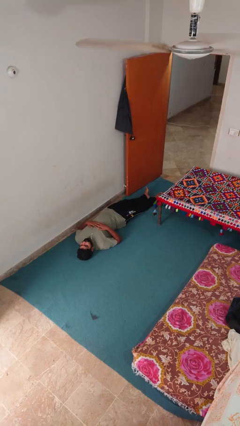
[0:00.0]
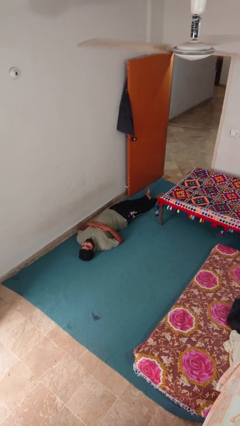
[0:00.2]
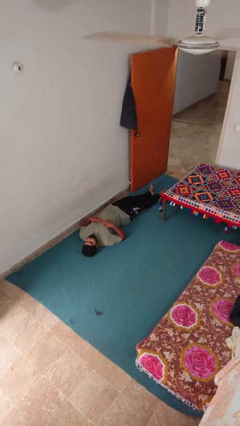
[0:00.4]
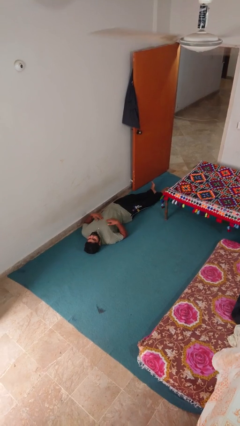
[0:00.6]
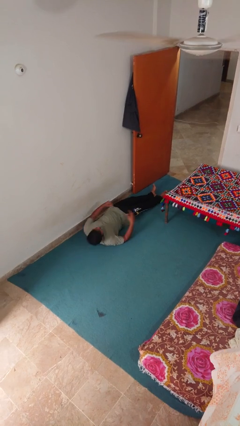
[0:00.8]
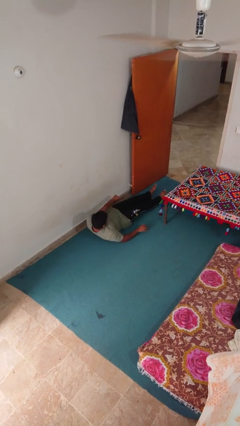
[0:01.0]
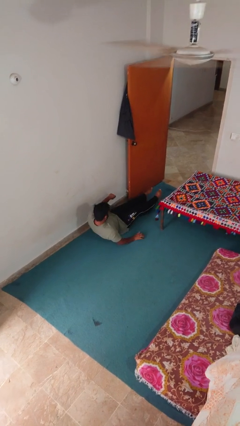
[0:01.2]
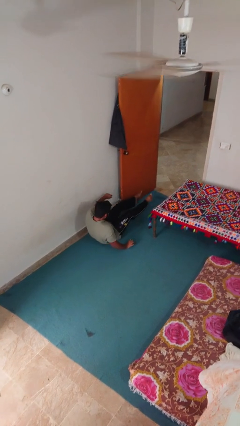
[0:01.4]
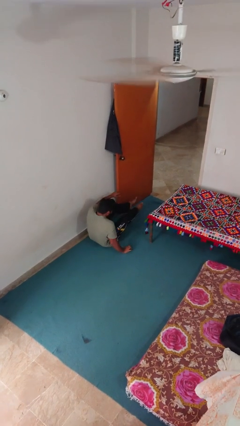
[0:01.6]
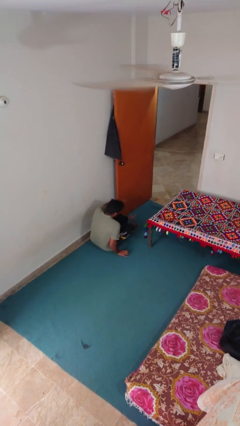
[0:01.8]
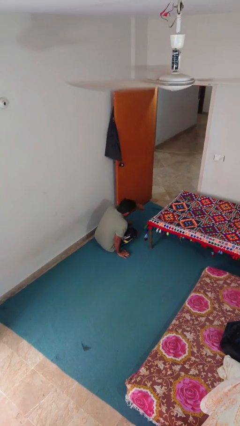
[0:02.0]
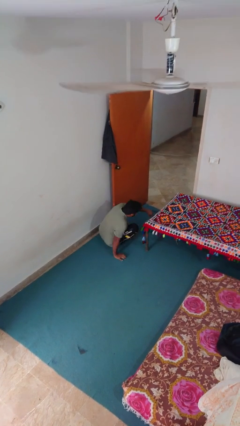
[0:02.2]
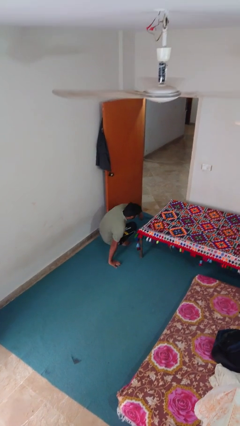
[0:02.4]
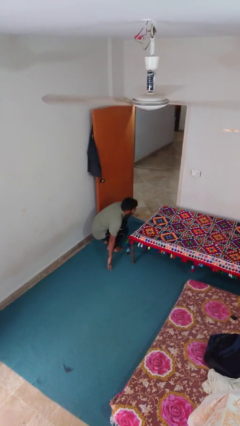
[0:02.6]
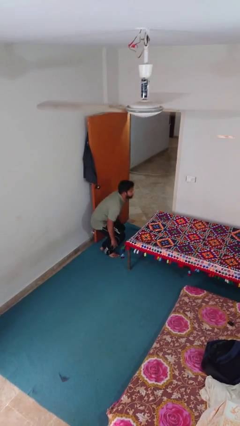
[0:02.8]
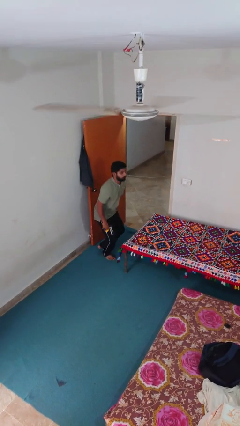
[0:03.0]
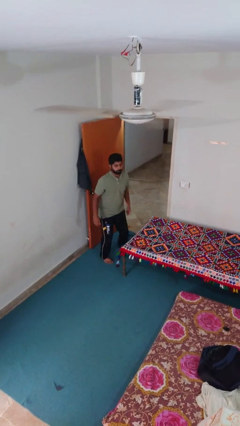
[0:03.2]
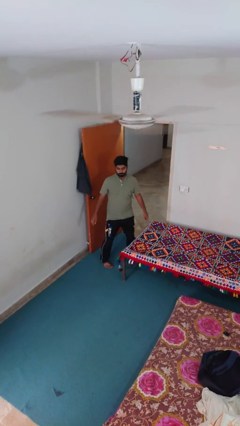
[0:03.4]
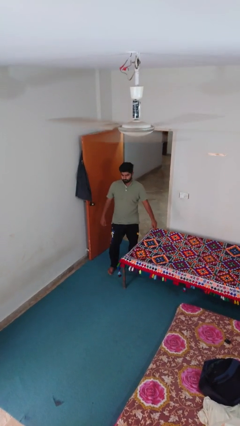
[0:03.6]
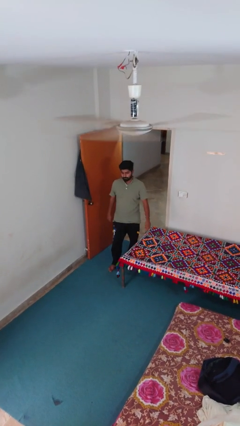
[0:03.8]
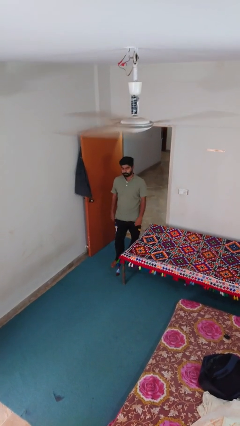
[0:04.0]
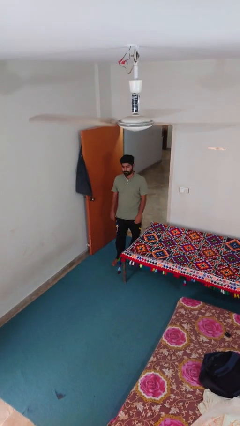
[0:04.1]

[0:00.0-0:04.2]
person stands up from floor

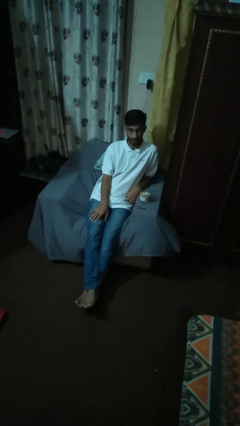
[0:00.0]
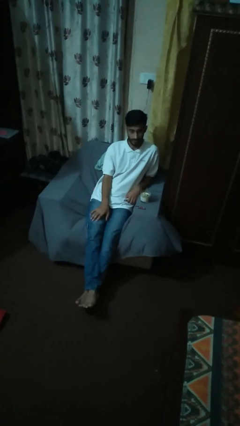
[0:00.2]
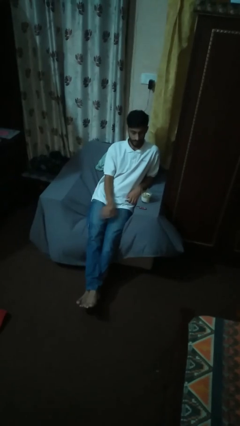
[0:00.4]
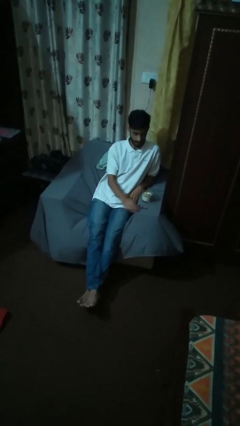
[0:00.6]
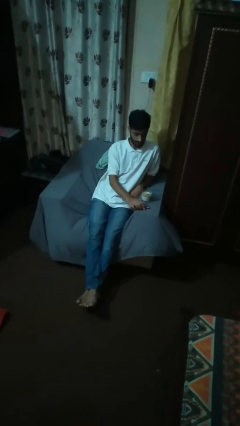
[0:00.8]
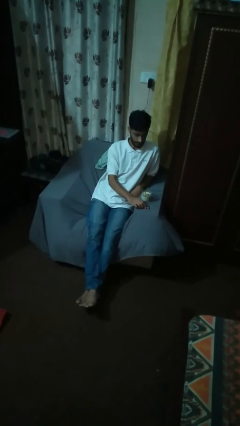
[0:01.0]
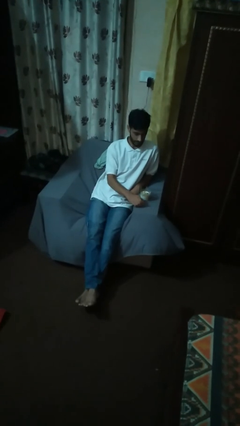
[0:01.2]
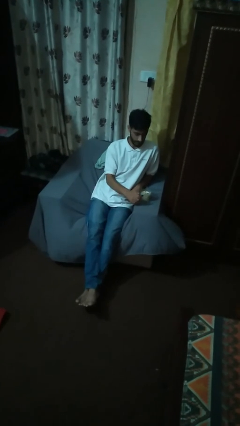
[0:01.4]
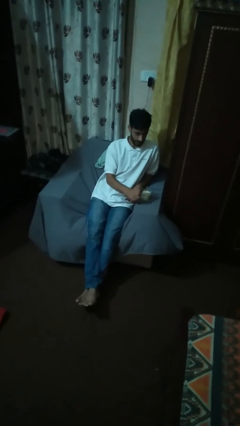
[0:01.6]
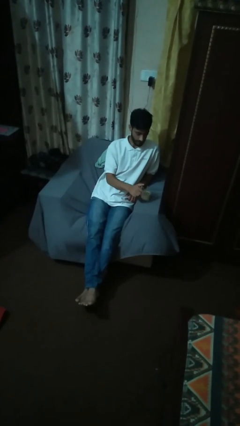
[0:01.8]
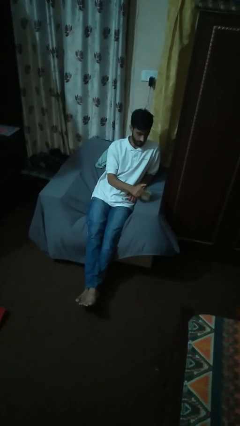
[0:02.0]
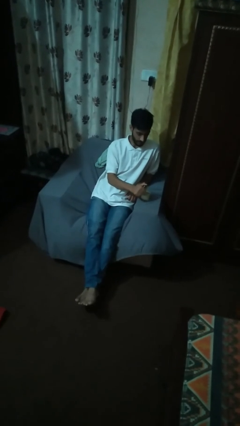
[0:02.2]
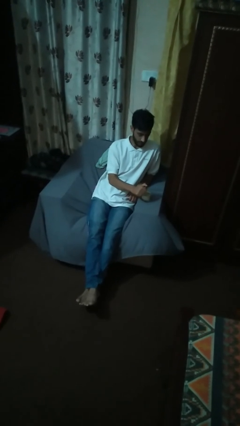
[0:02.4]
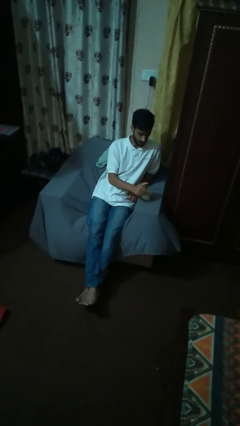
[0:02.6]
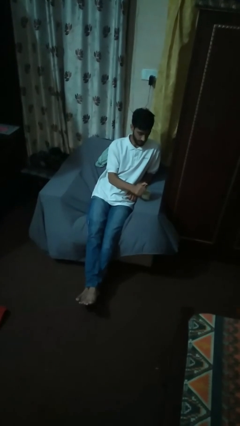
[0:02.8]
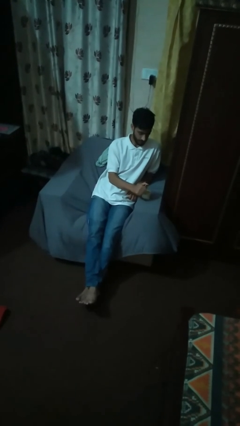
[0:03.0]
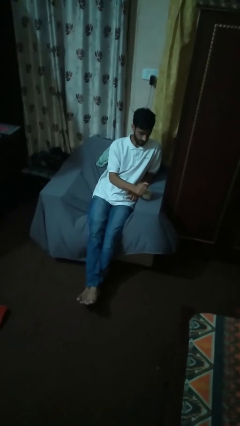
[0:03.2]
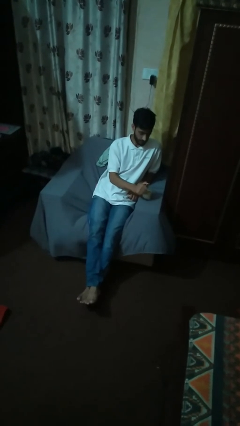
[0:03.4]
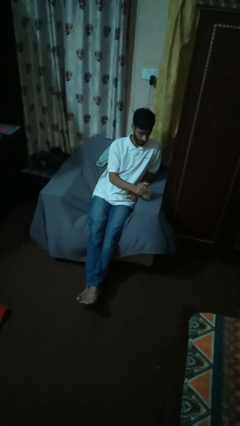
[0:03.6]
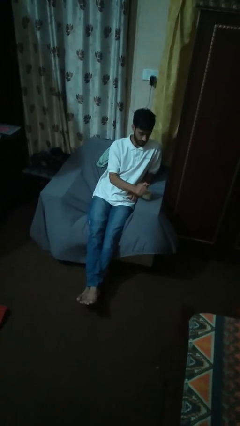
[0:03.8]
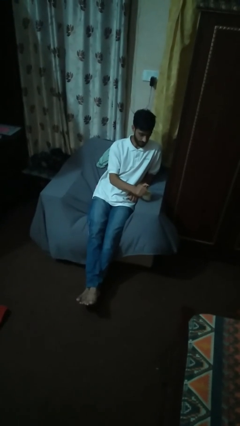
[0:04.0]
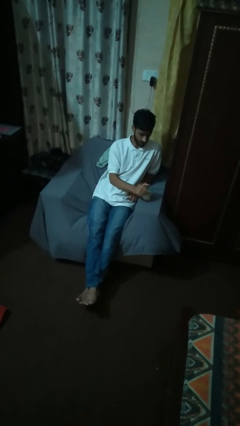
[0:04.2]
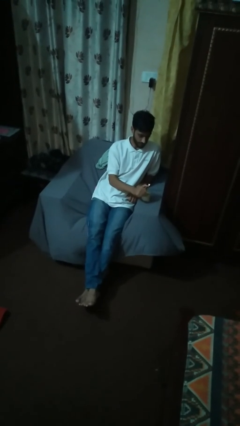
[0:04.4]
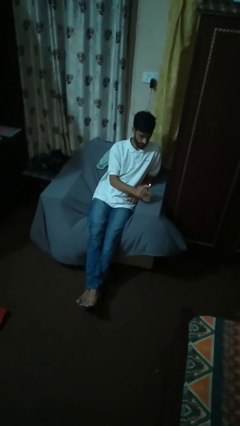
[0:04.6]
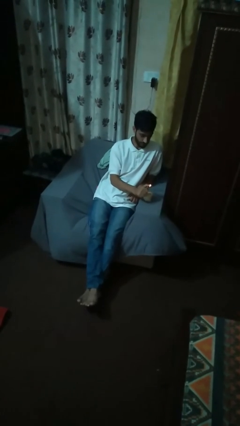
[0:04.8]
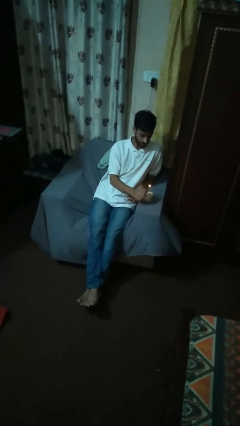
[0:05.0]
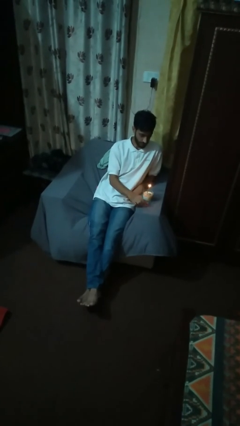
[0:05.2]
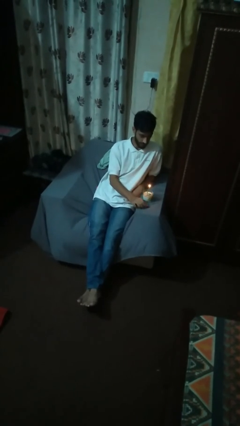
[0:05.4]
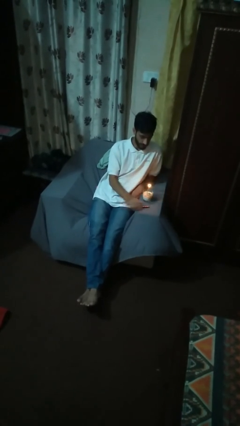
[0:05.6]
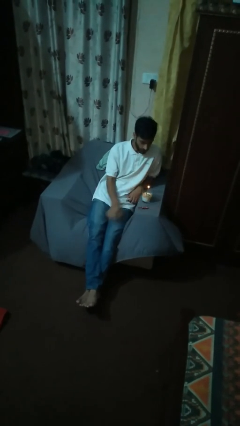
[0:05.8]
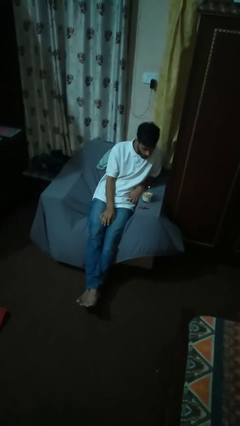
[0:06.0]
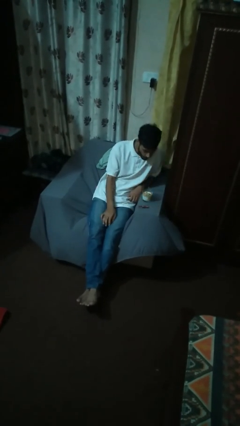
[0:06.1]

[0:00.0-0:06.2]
person lights candle

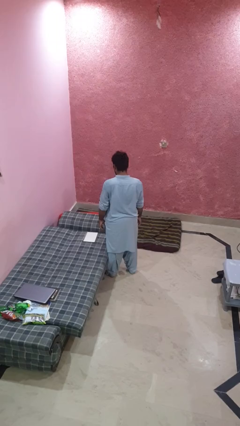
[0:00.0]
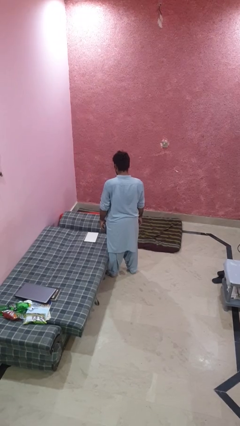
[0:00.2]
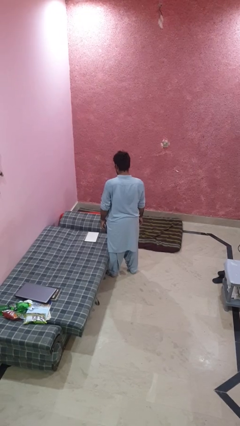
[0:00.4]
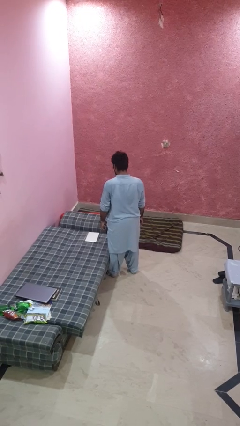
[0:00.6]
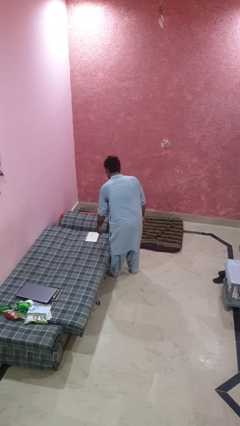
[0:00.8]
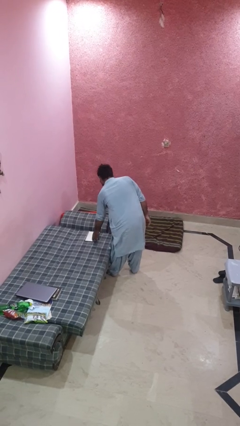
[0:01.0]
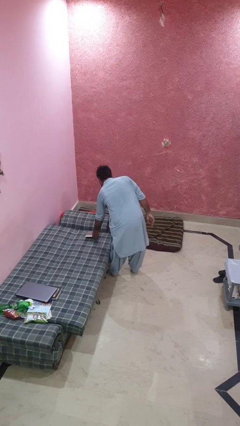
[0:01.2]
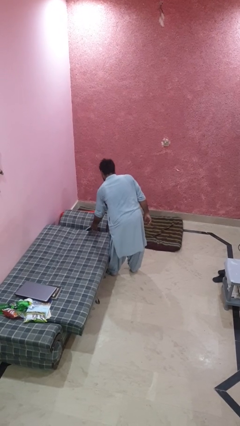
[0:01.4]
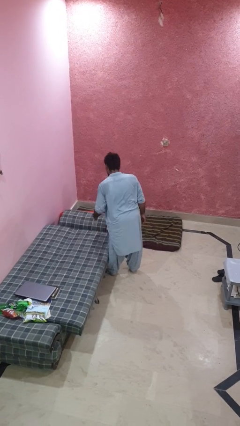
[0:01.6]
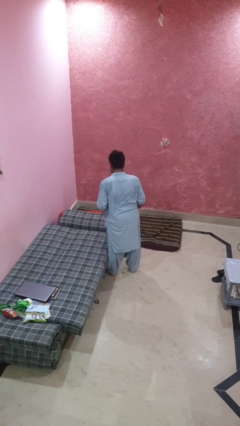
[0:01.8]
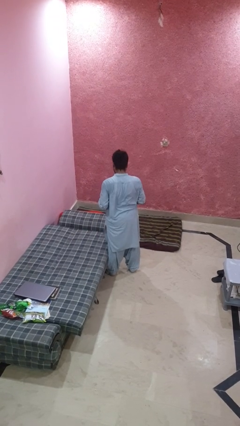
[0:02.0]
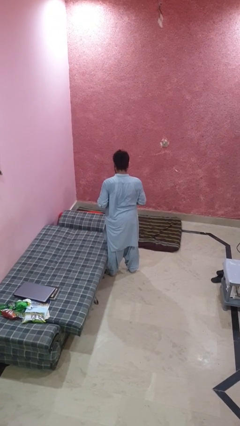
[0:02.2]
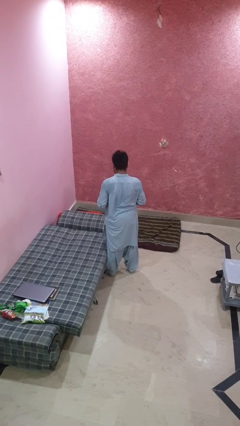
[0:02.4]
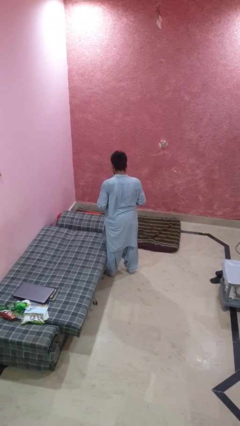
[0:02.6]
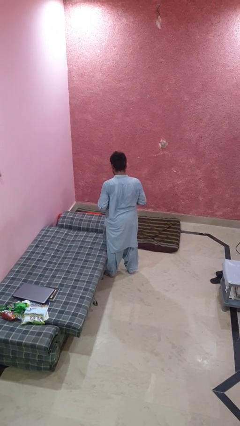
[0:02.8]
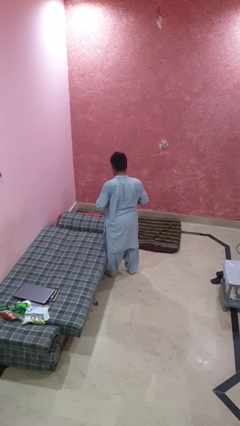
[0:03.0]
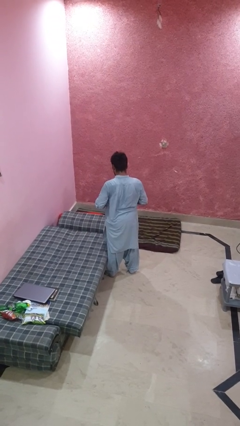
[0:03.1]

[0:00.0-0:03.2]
person picks up object from bed

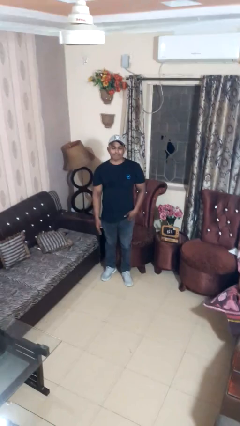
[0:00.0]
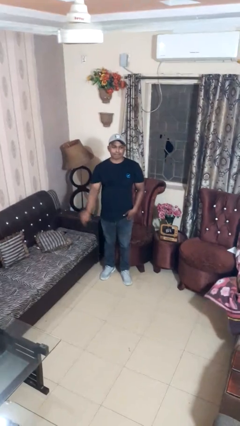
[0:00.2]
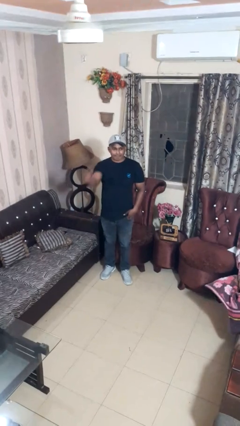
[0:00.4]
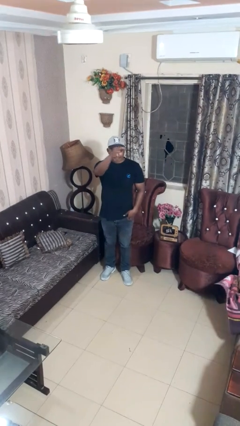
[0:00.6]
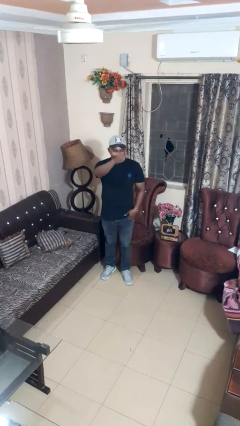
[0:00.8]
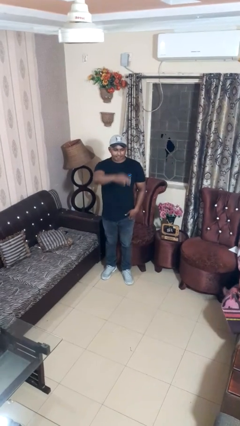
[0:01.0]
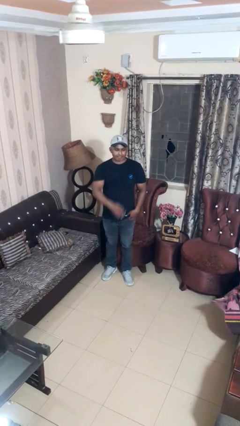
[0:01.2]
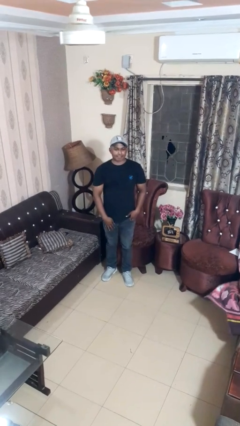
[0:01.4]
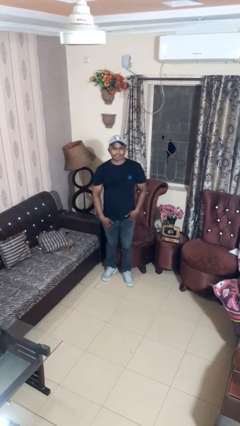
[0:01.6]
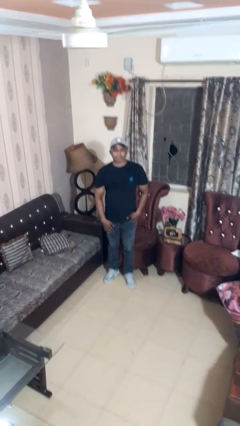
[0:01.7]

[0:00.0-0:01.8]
person gestures swipe right

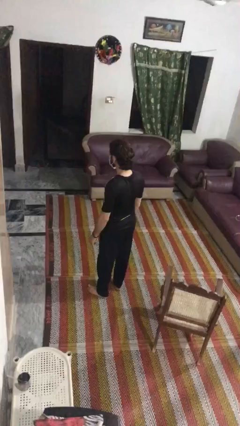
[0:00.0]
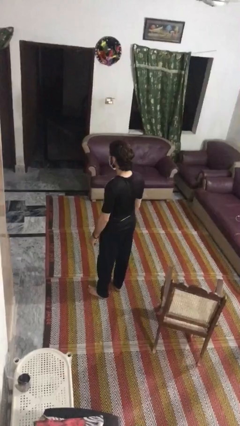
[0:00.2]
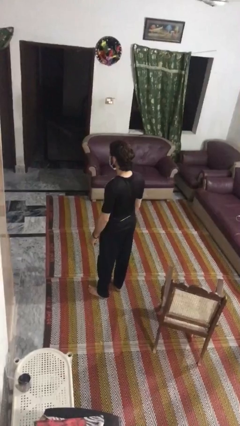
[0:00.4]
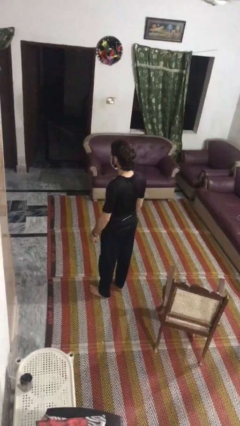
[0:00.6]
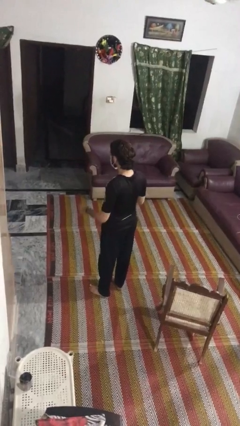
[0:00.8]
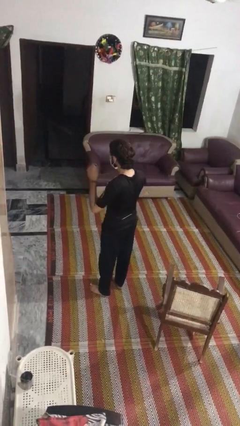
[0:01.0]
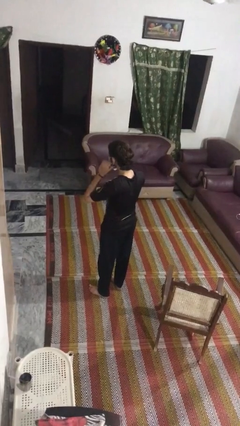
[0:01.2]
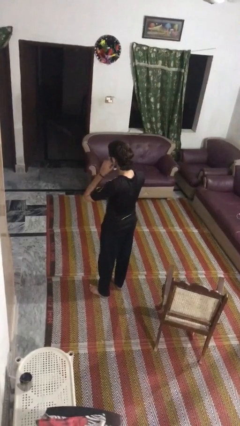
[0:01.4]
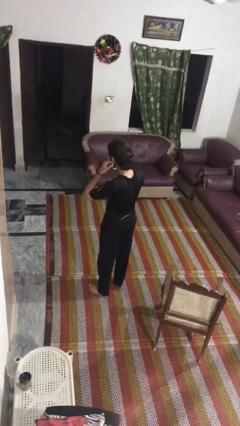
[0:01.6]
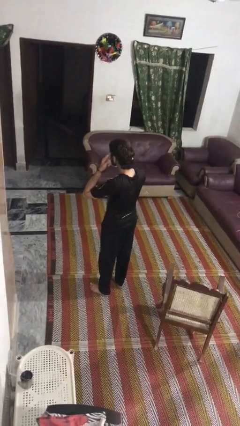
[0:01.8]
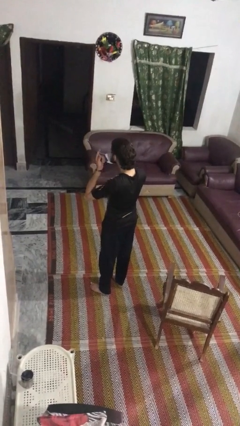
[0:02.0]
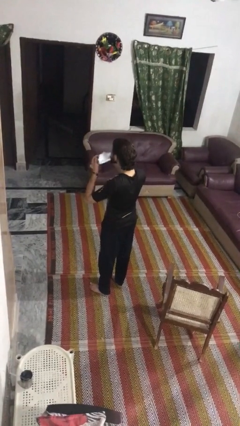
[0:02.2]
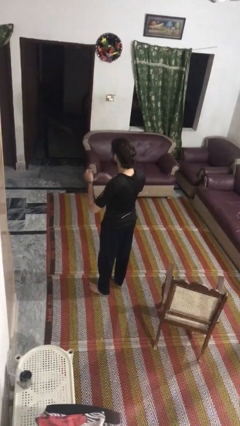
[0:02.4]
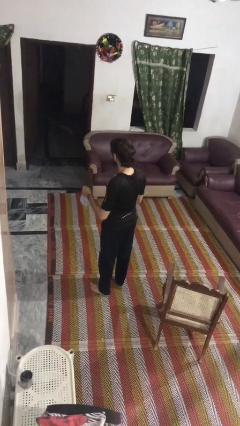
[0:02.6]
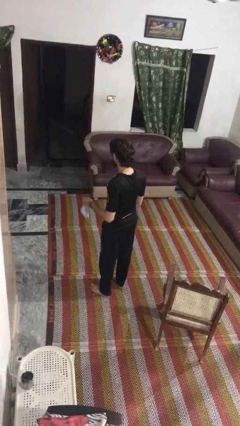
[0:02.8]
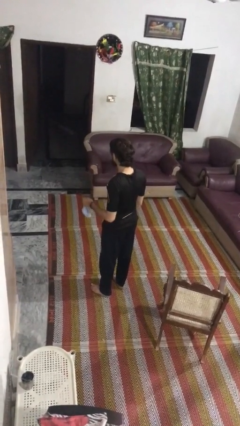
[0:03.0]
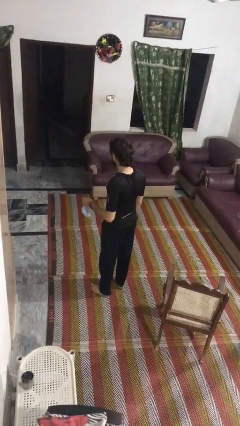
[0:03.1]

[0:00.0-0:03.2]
person takes off facemask
